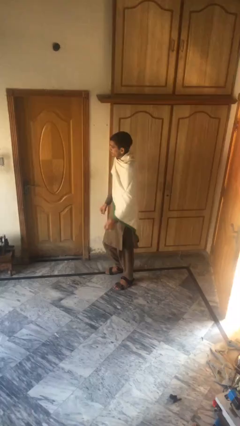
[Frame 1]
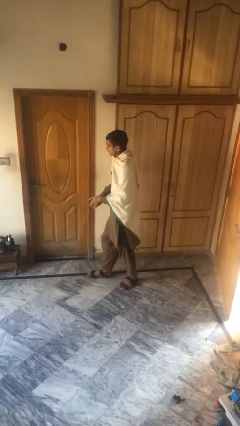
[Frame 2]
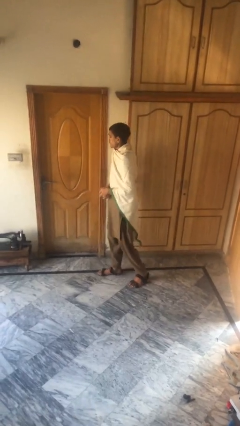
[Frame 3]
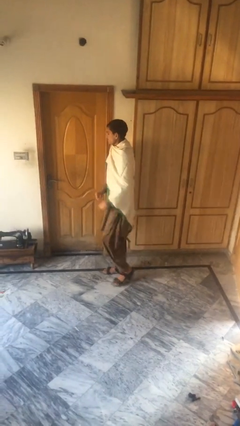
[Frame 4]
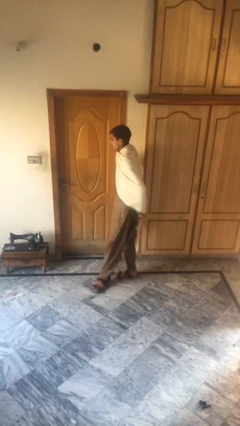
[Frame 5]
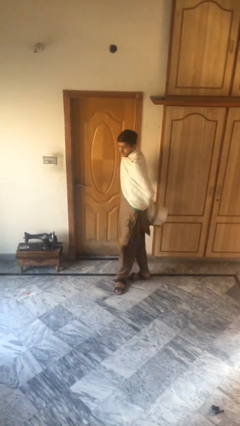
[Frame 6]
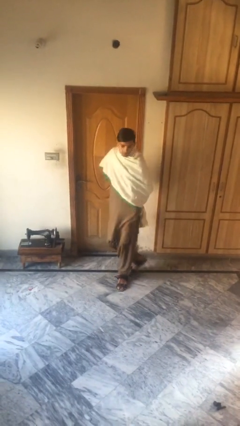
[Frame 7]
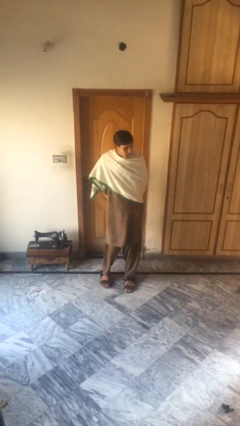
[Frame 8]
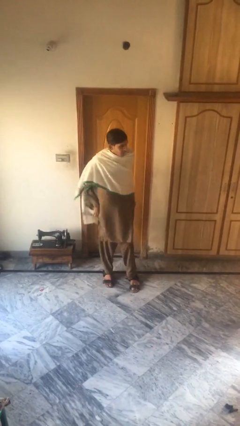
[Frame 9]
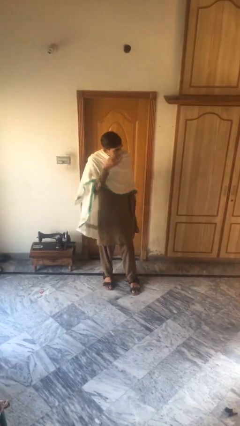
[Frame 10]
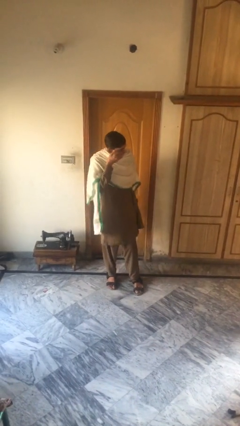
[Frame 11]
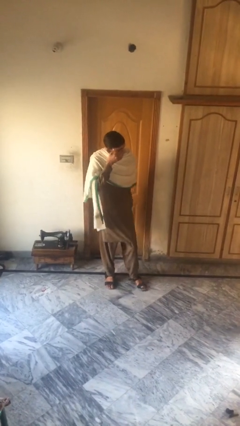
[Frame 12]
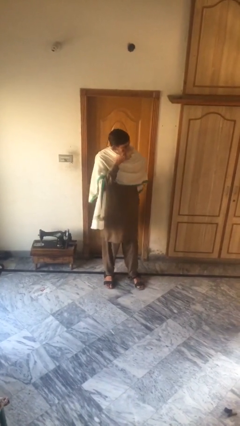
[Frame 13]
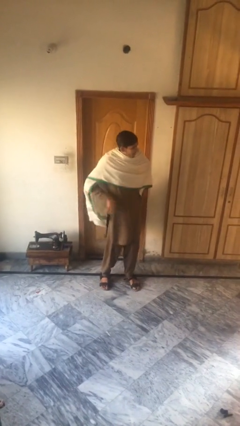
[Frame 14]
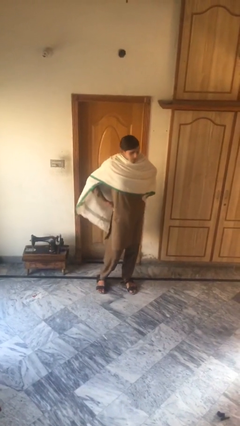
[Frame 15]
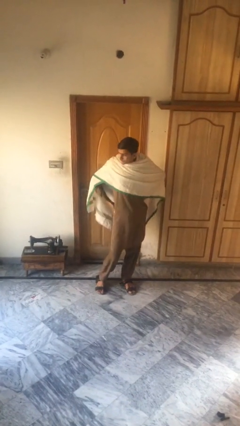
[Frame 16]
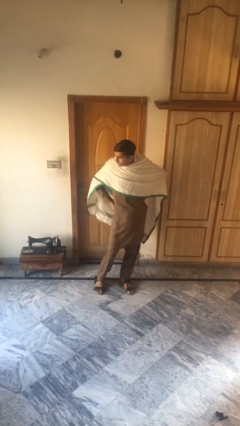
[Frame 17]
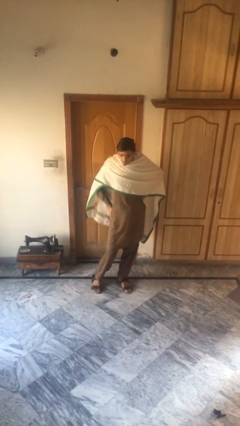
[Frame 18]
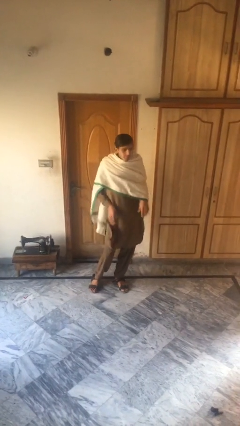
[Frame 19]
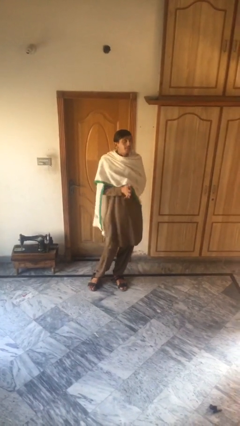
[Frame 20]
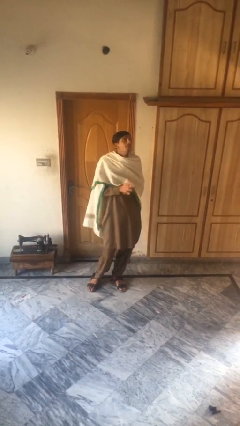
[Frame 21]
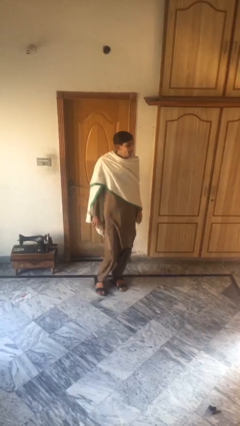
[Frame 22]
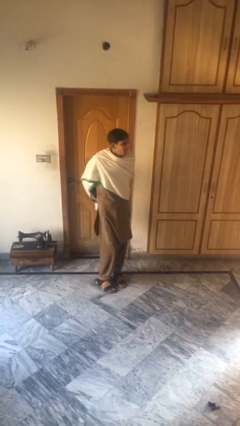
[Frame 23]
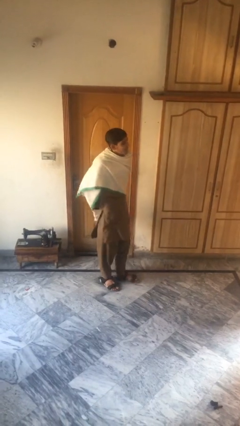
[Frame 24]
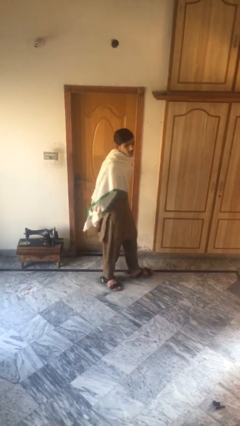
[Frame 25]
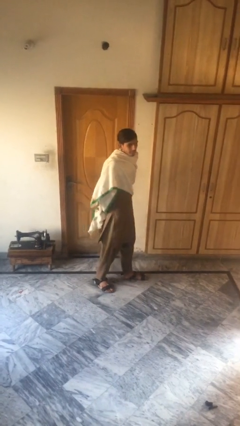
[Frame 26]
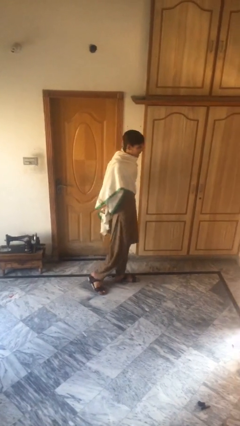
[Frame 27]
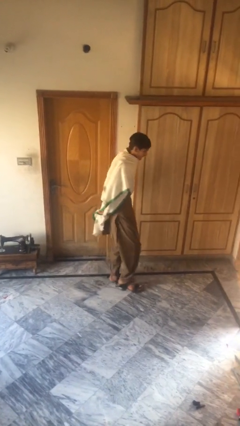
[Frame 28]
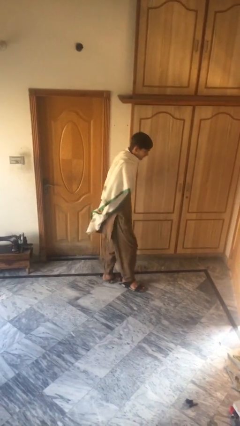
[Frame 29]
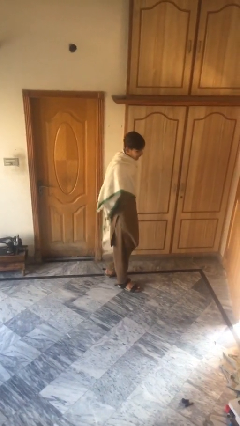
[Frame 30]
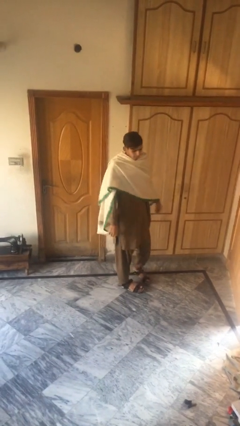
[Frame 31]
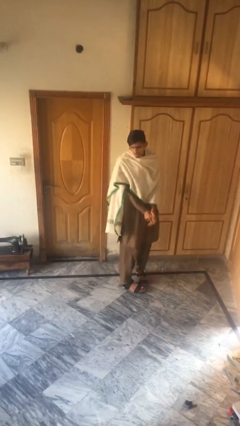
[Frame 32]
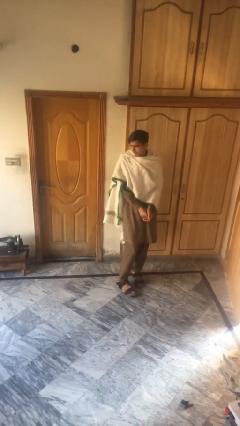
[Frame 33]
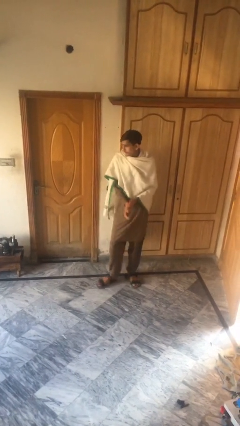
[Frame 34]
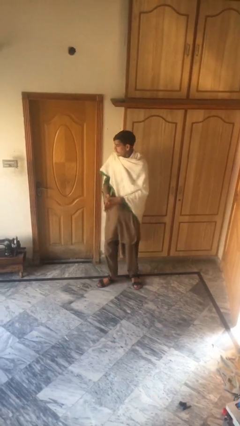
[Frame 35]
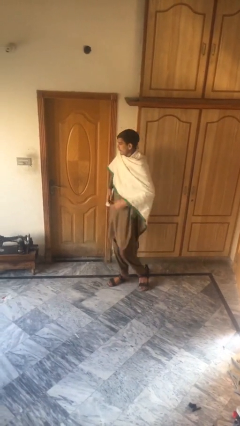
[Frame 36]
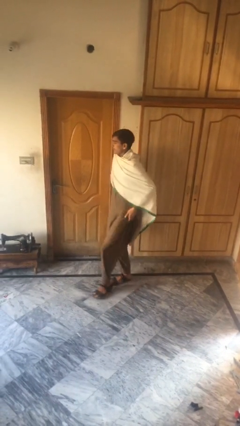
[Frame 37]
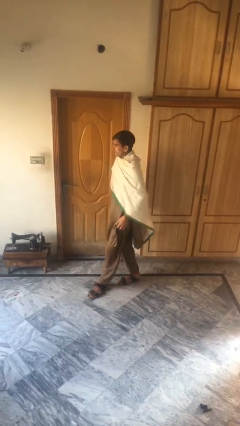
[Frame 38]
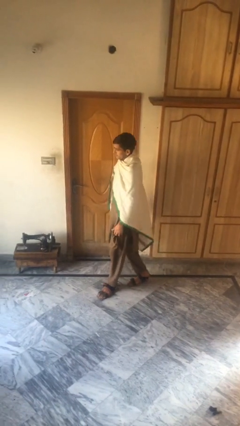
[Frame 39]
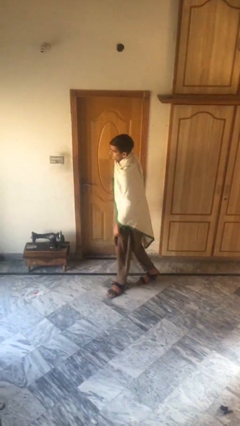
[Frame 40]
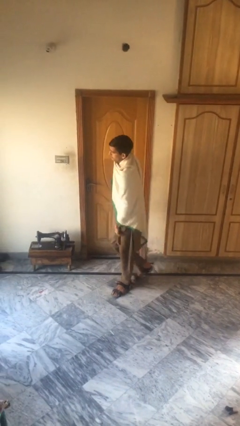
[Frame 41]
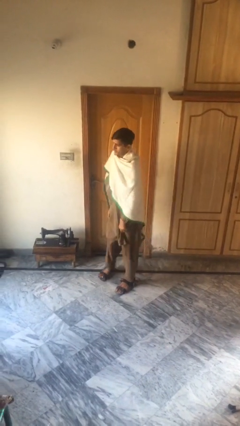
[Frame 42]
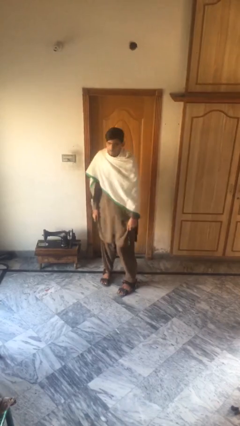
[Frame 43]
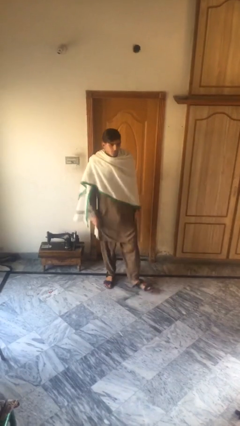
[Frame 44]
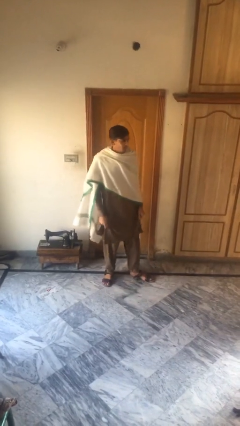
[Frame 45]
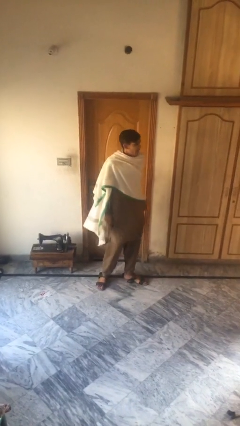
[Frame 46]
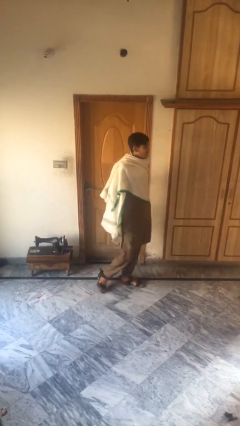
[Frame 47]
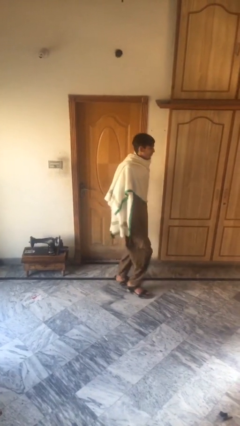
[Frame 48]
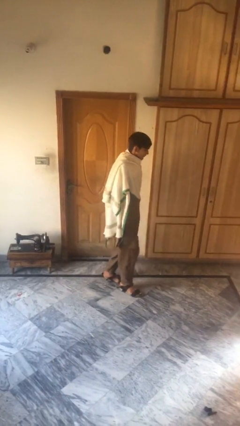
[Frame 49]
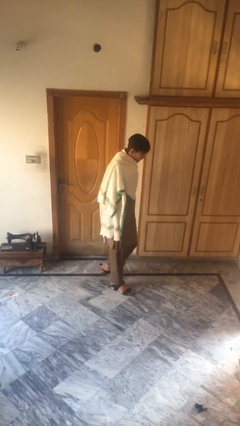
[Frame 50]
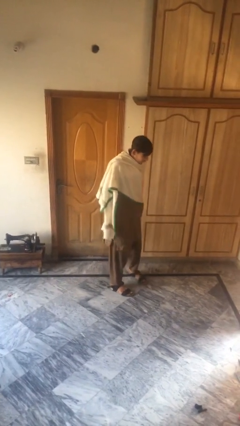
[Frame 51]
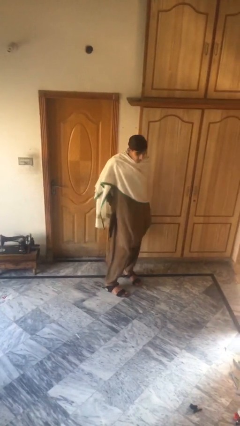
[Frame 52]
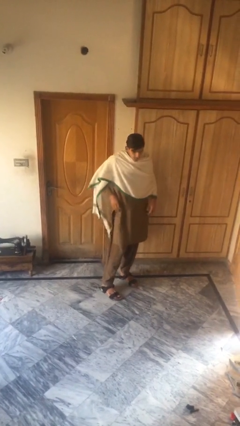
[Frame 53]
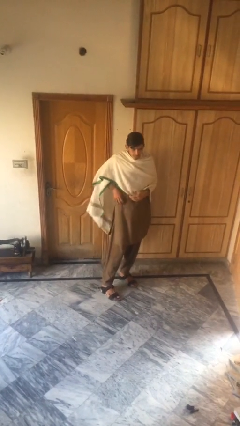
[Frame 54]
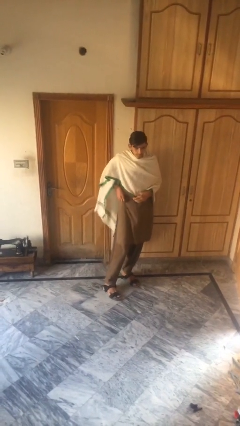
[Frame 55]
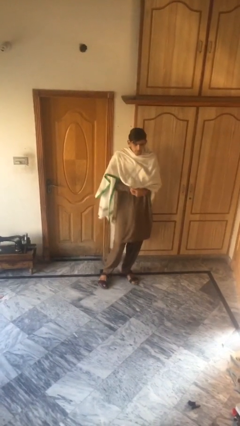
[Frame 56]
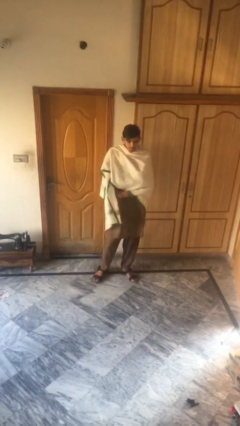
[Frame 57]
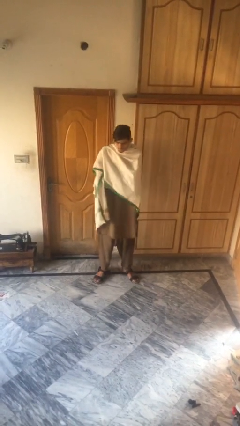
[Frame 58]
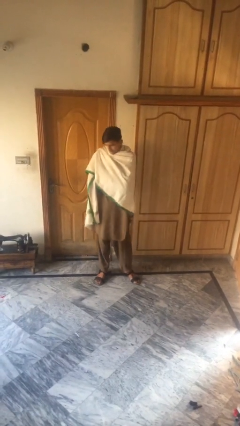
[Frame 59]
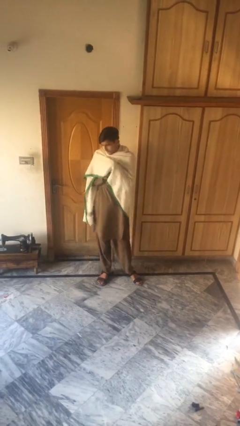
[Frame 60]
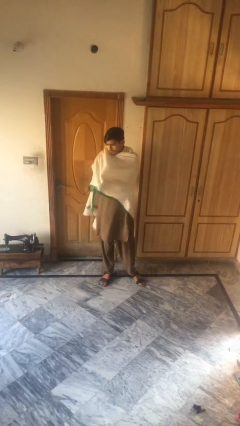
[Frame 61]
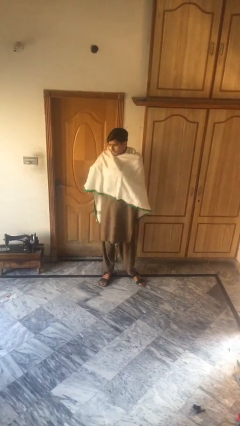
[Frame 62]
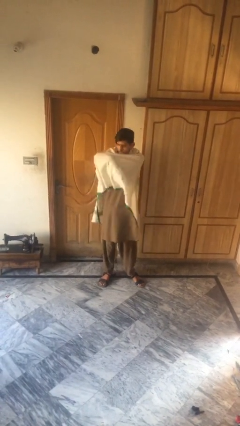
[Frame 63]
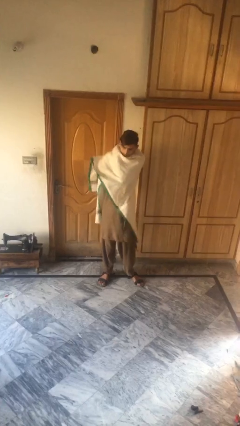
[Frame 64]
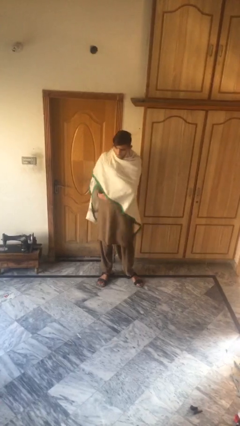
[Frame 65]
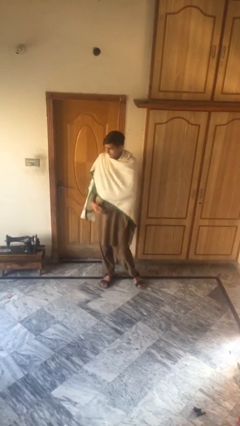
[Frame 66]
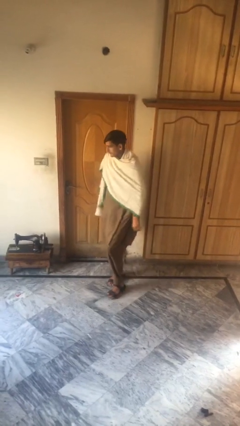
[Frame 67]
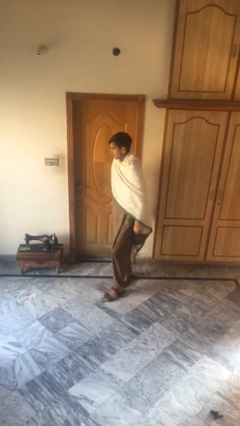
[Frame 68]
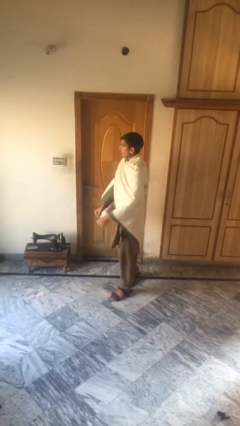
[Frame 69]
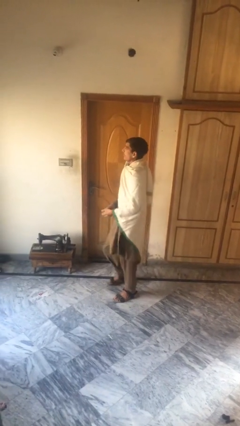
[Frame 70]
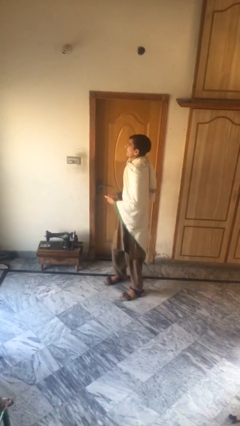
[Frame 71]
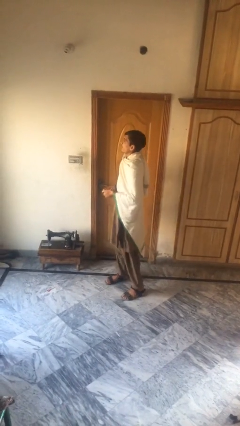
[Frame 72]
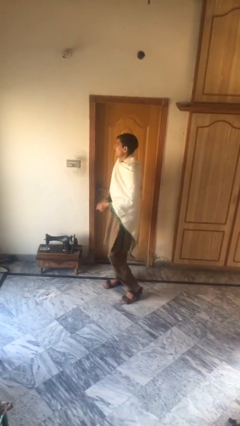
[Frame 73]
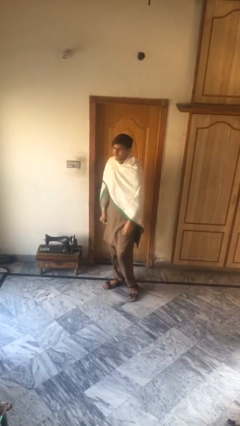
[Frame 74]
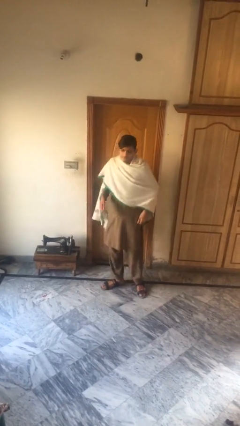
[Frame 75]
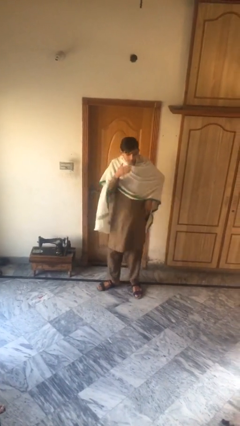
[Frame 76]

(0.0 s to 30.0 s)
person walks

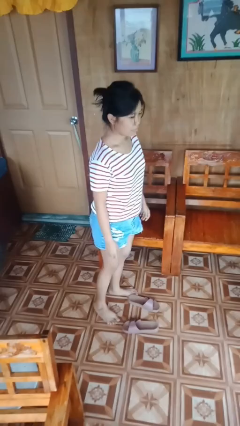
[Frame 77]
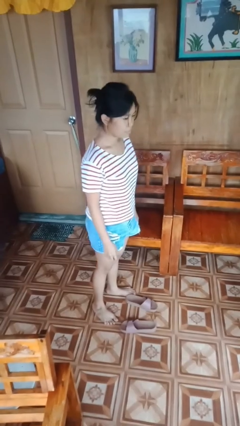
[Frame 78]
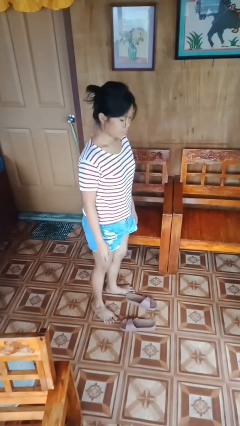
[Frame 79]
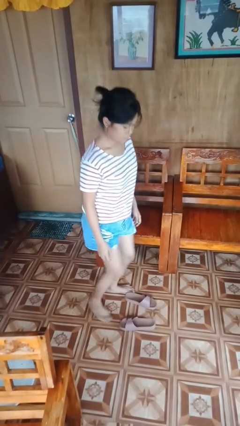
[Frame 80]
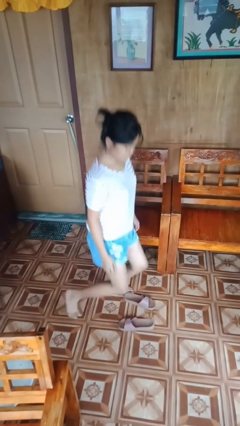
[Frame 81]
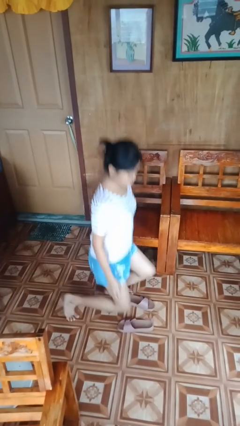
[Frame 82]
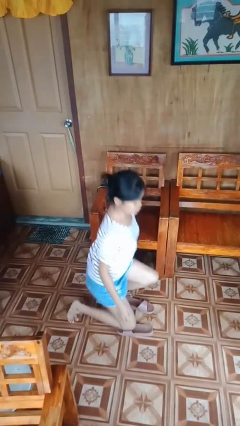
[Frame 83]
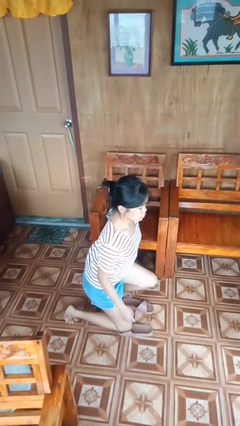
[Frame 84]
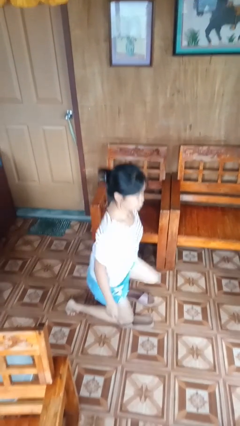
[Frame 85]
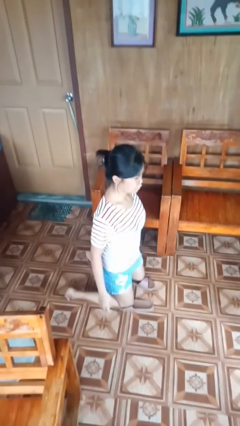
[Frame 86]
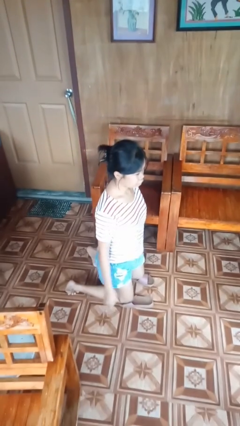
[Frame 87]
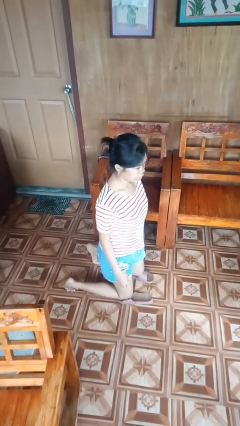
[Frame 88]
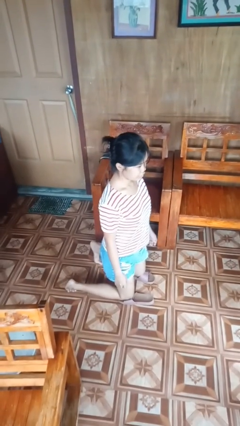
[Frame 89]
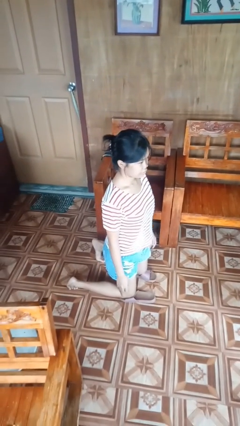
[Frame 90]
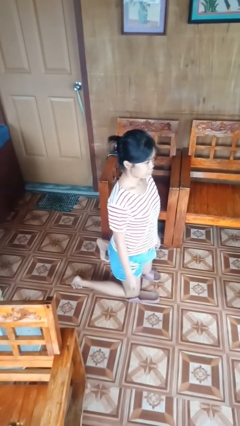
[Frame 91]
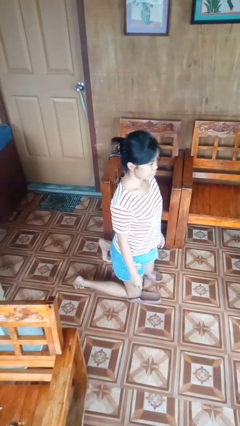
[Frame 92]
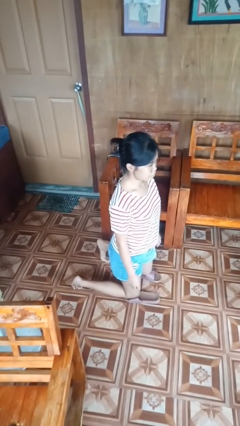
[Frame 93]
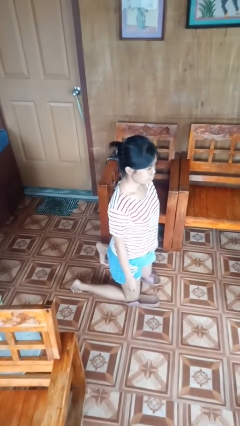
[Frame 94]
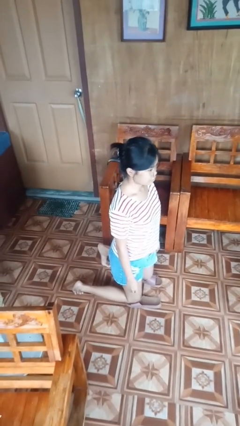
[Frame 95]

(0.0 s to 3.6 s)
person kneels
